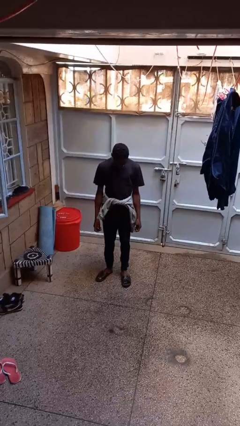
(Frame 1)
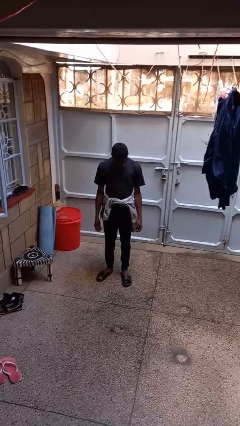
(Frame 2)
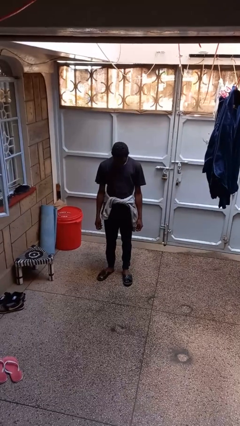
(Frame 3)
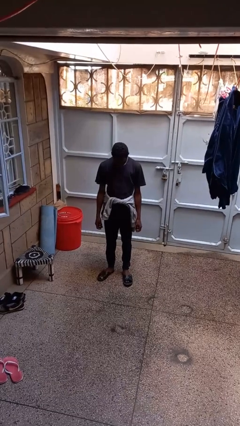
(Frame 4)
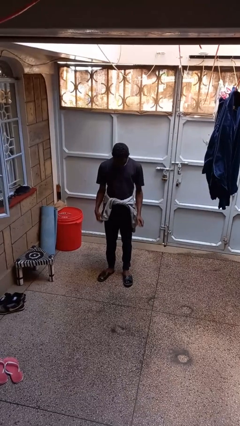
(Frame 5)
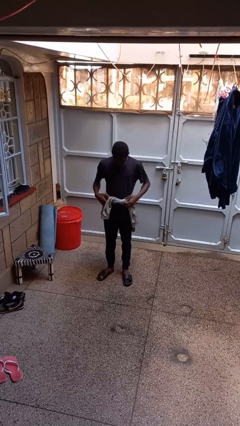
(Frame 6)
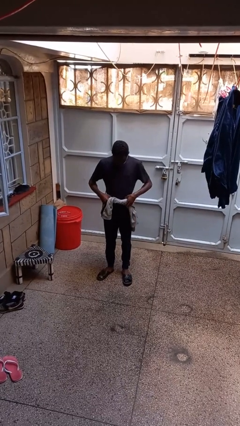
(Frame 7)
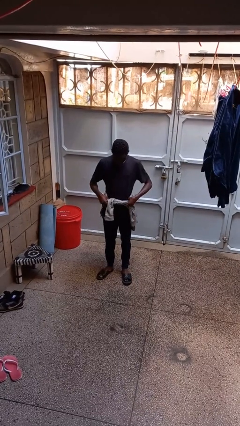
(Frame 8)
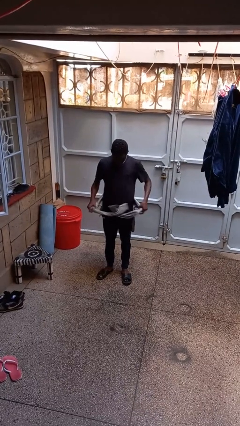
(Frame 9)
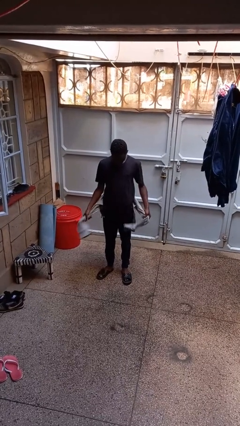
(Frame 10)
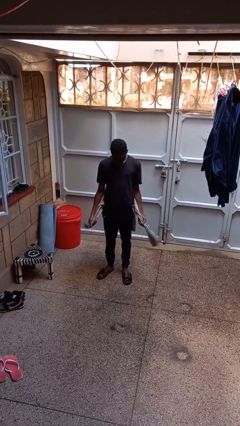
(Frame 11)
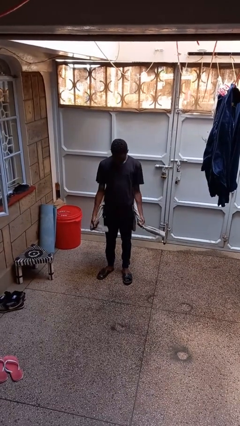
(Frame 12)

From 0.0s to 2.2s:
person unties jacket around waist

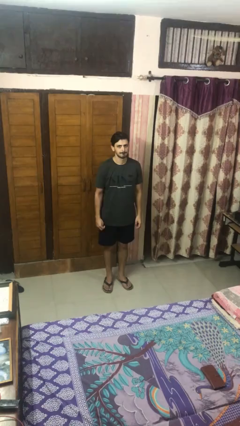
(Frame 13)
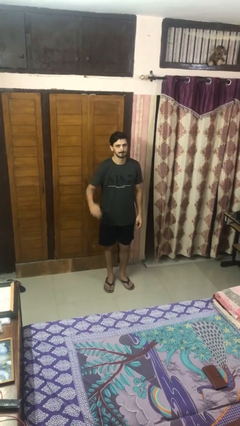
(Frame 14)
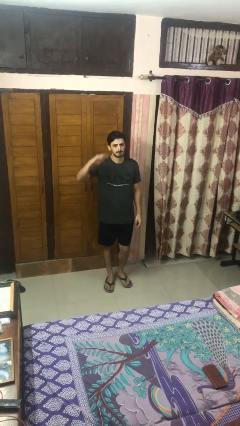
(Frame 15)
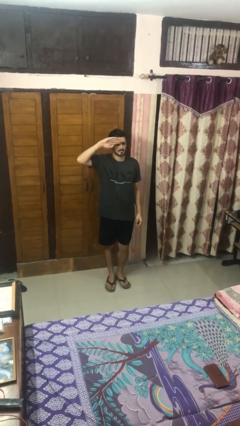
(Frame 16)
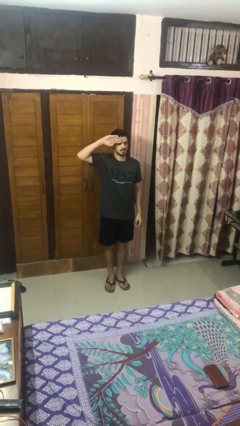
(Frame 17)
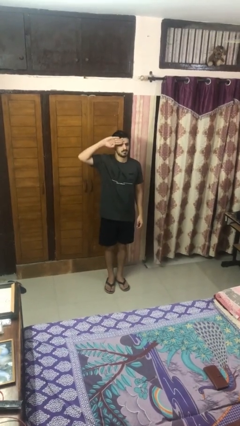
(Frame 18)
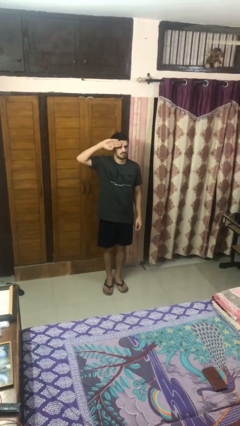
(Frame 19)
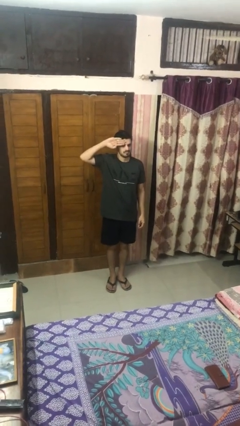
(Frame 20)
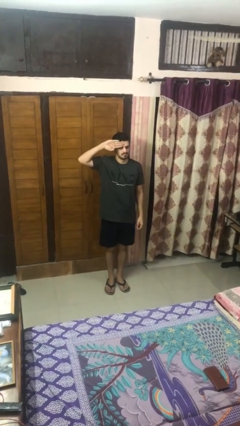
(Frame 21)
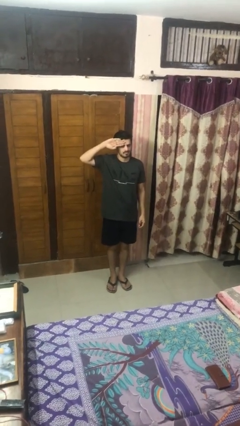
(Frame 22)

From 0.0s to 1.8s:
person salutes

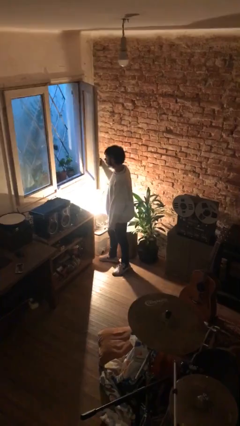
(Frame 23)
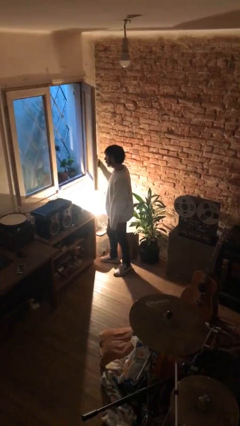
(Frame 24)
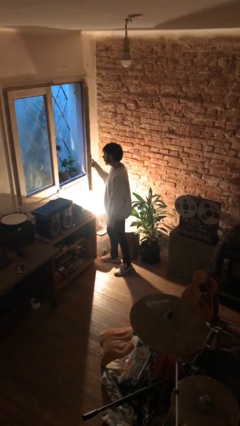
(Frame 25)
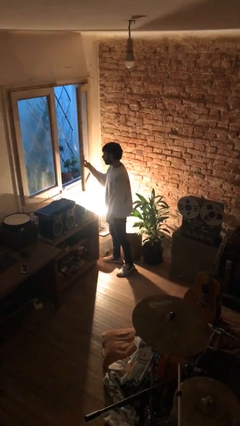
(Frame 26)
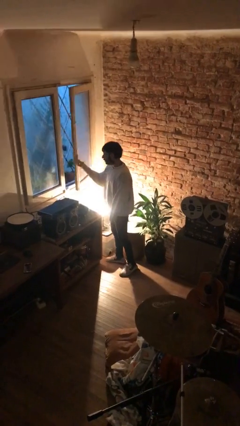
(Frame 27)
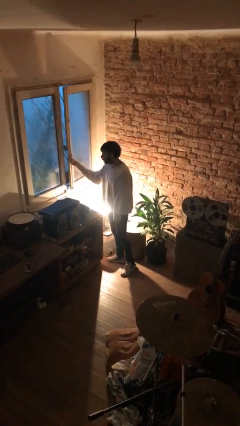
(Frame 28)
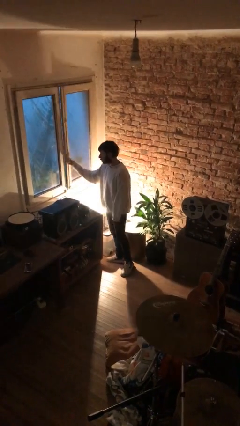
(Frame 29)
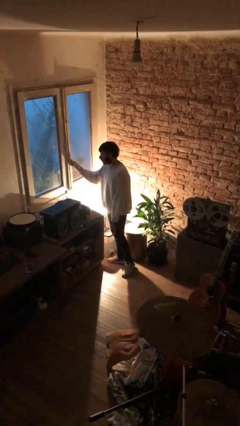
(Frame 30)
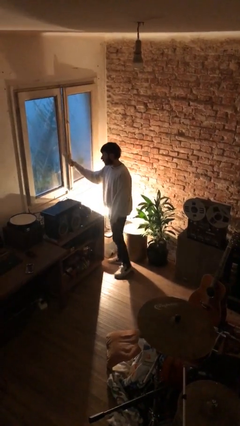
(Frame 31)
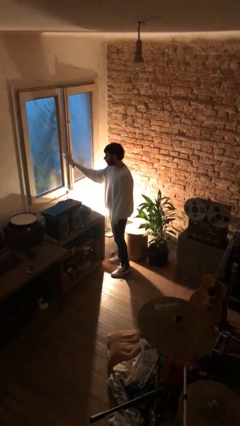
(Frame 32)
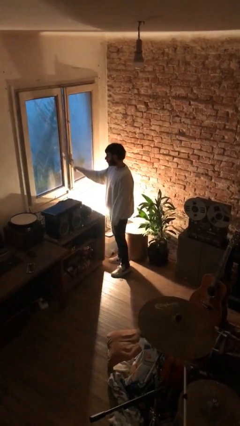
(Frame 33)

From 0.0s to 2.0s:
person closes home window

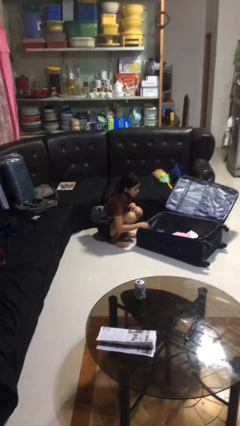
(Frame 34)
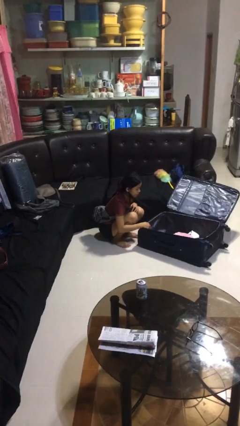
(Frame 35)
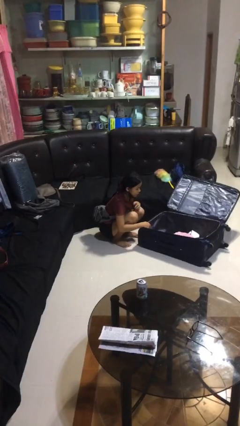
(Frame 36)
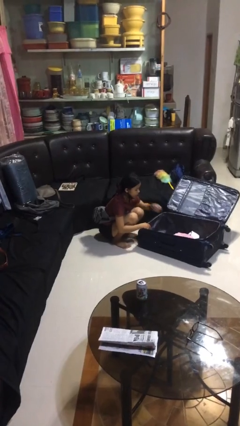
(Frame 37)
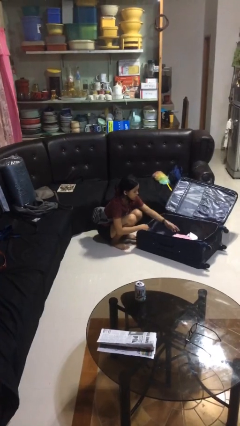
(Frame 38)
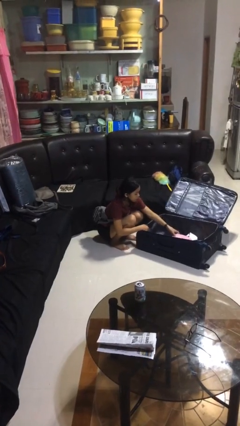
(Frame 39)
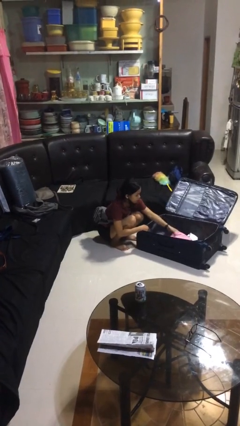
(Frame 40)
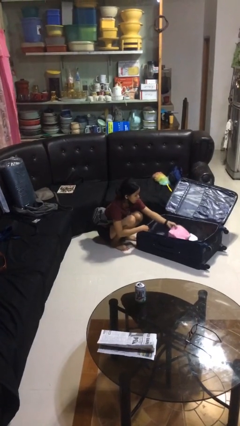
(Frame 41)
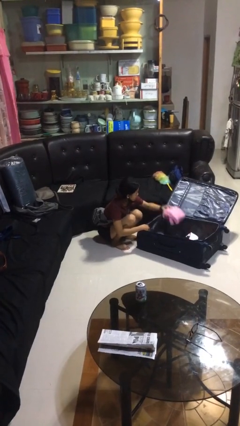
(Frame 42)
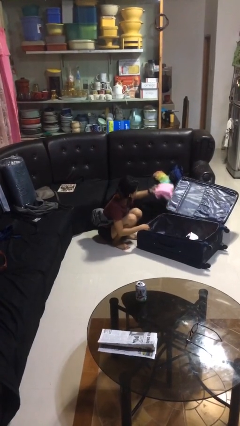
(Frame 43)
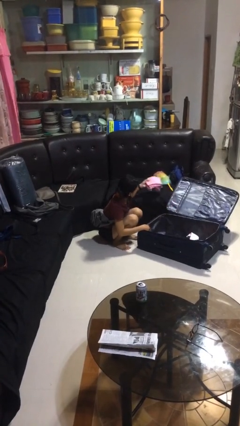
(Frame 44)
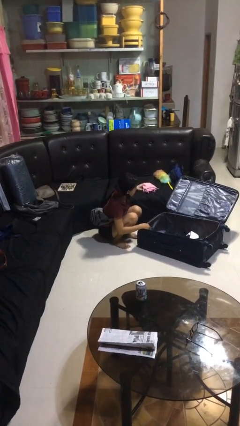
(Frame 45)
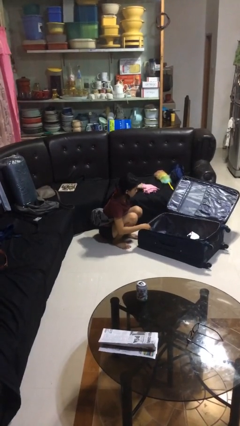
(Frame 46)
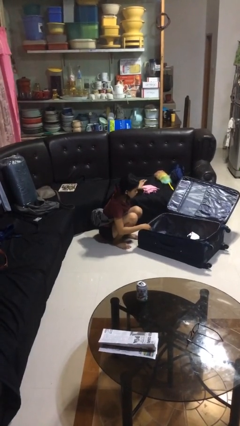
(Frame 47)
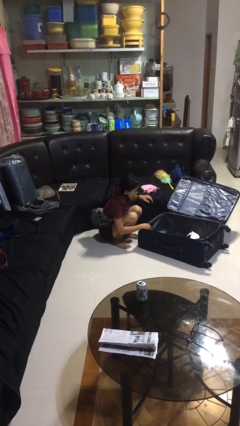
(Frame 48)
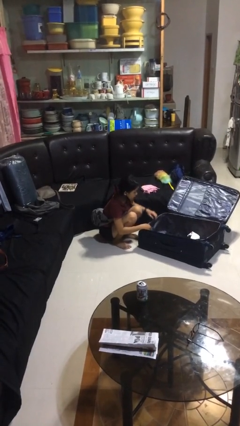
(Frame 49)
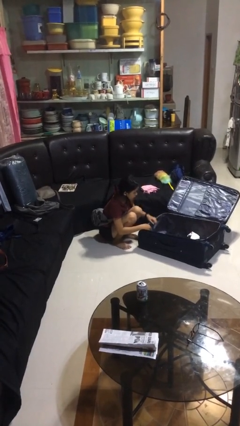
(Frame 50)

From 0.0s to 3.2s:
person loads clothes into suitcase

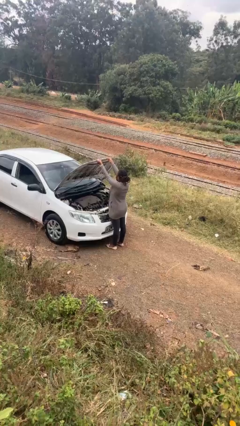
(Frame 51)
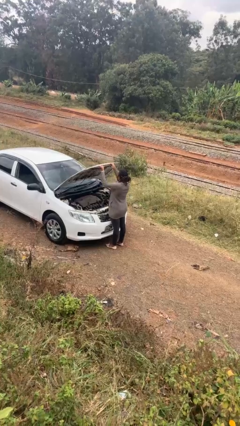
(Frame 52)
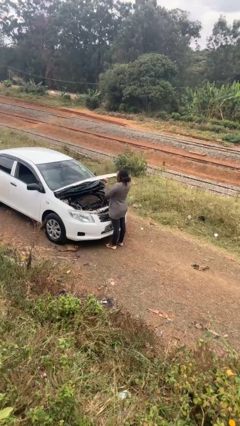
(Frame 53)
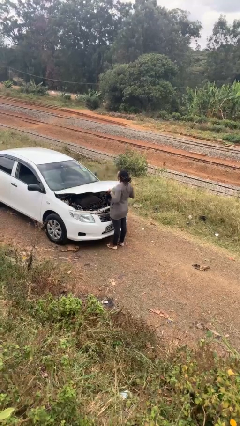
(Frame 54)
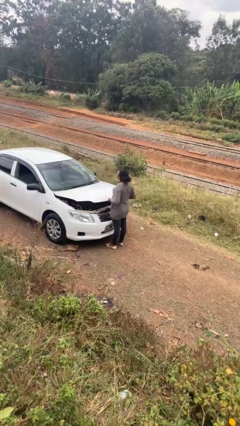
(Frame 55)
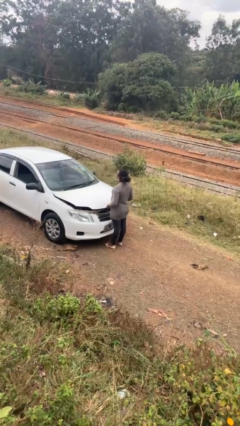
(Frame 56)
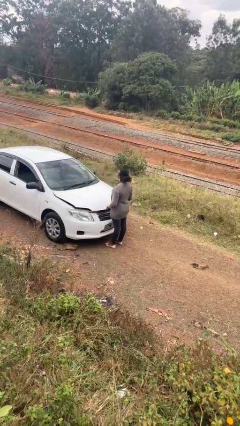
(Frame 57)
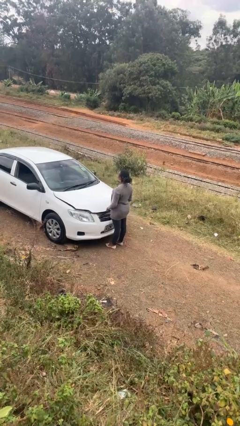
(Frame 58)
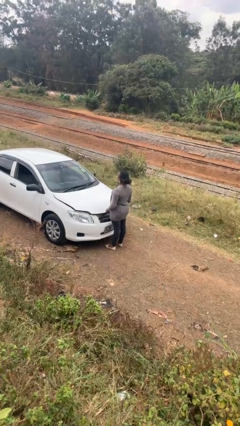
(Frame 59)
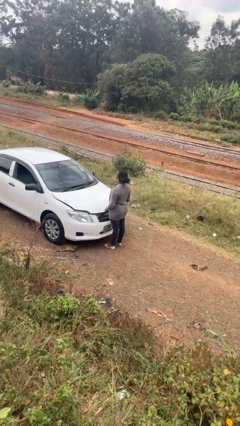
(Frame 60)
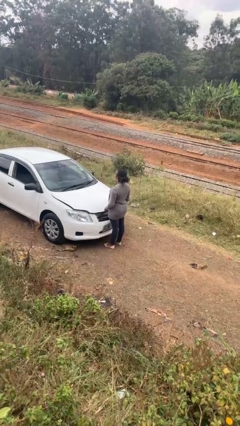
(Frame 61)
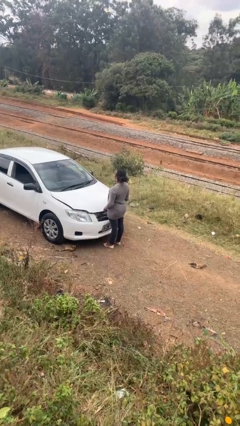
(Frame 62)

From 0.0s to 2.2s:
person closes car hood

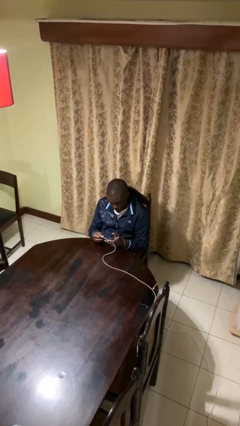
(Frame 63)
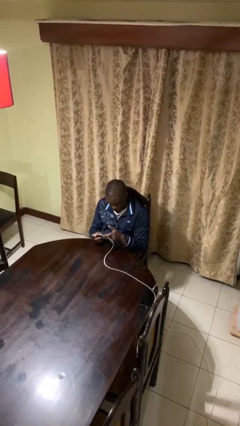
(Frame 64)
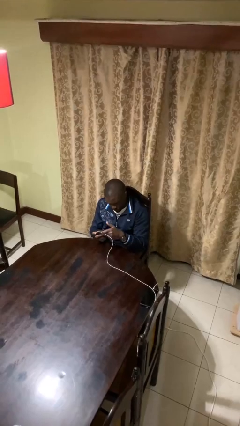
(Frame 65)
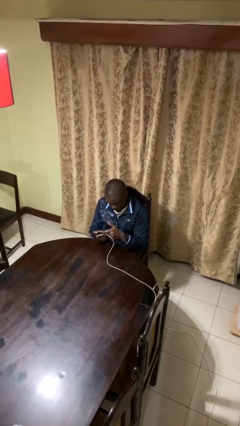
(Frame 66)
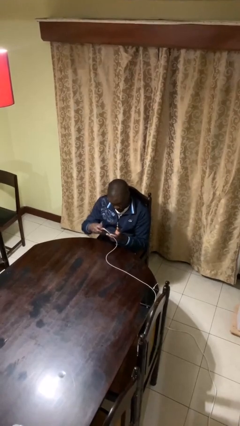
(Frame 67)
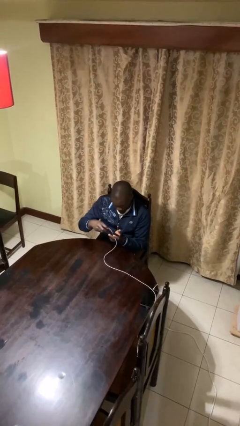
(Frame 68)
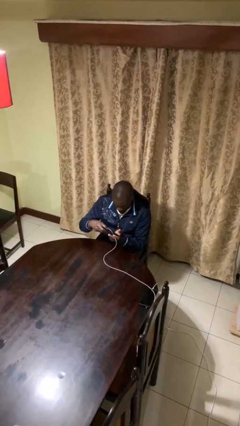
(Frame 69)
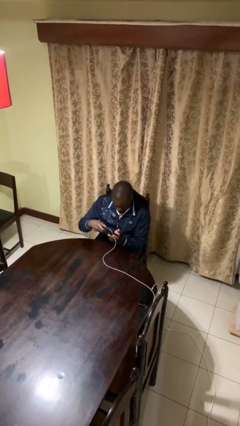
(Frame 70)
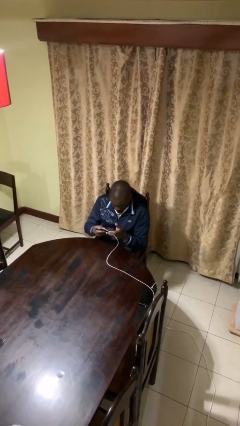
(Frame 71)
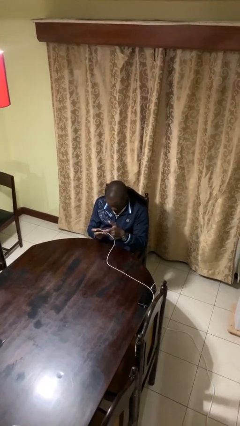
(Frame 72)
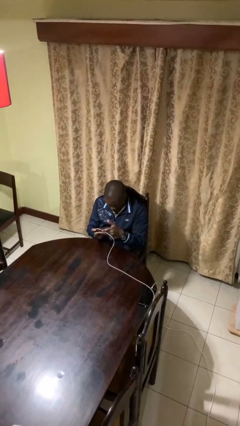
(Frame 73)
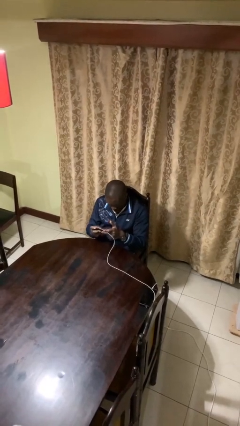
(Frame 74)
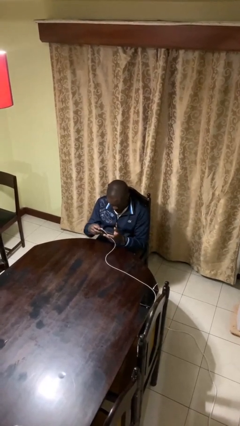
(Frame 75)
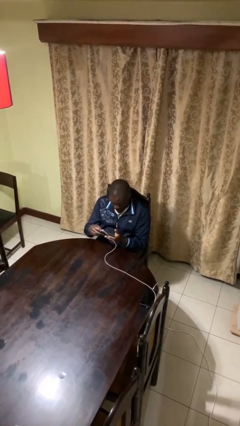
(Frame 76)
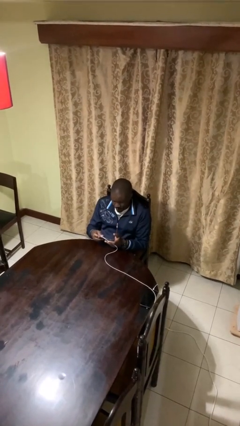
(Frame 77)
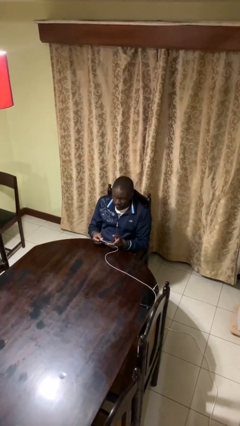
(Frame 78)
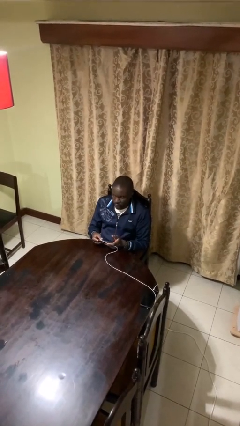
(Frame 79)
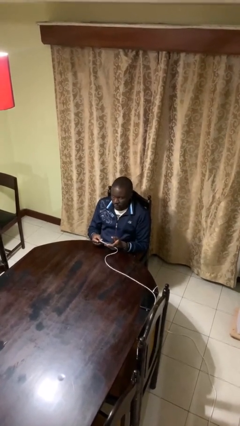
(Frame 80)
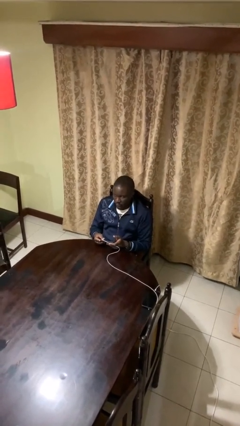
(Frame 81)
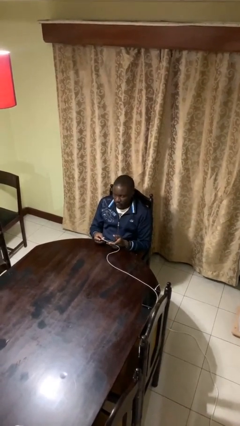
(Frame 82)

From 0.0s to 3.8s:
person interacts with handheld game

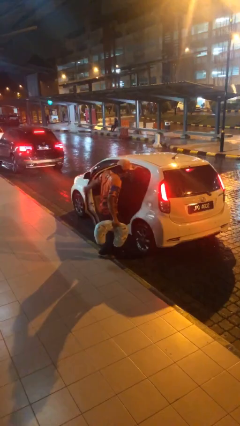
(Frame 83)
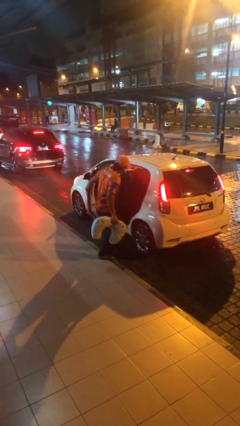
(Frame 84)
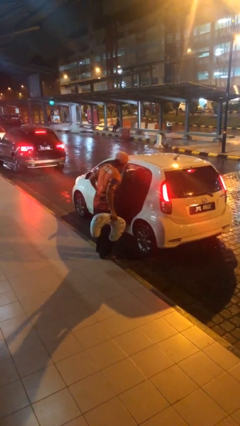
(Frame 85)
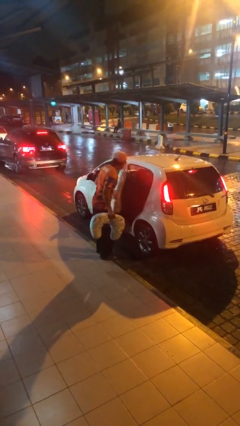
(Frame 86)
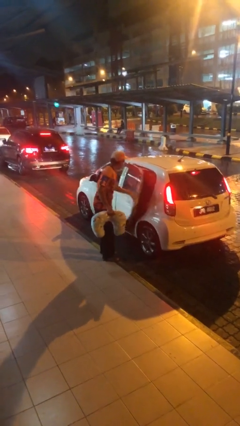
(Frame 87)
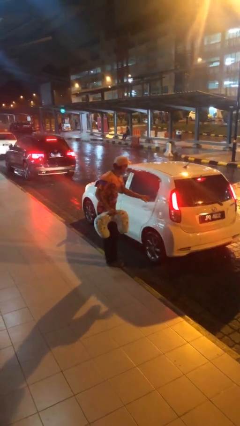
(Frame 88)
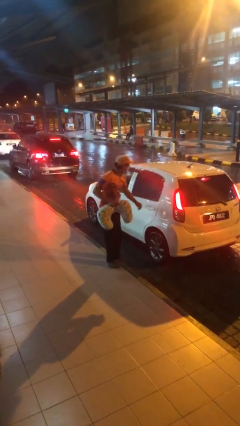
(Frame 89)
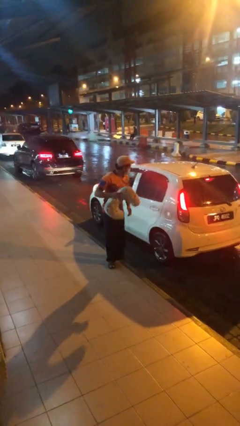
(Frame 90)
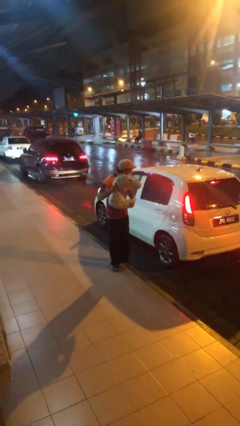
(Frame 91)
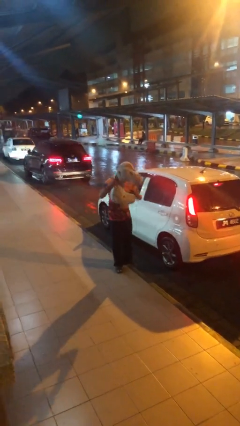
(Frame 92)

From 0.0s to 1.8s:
person closes car door
